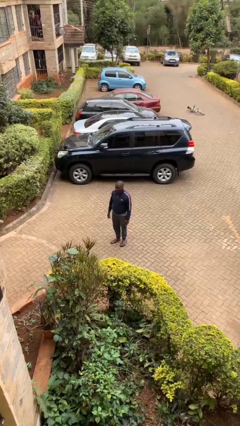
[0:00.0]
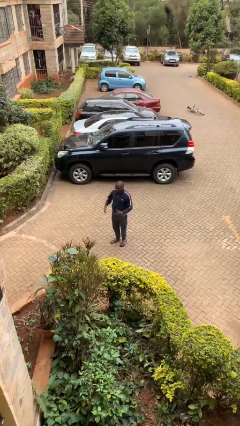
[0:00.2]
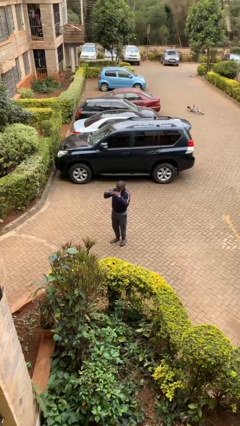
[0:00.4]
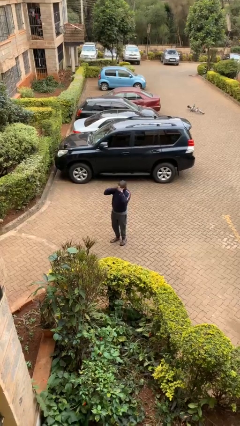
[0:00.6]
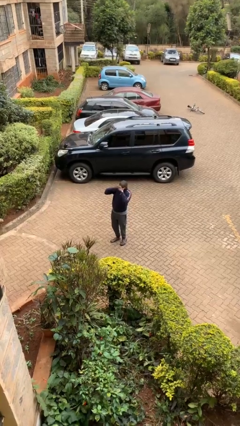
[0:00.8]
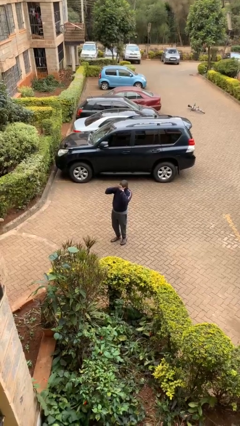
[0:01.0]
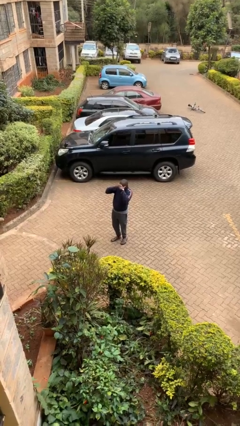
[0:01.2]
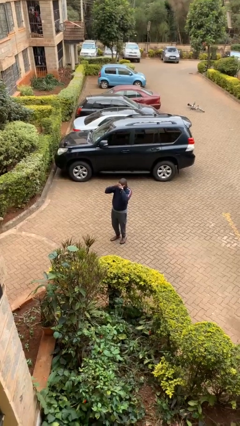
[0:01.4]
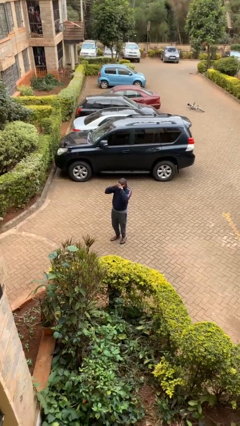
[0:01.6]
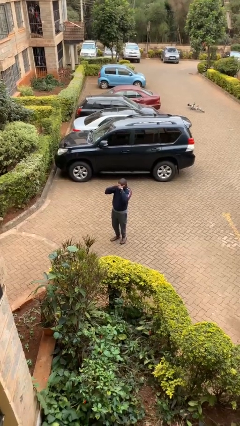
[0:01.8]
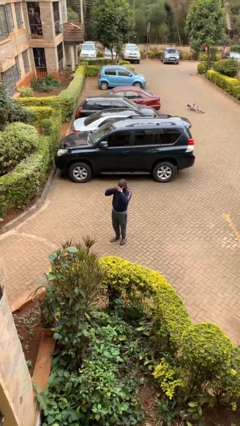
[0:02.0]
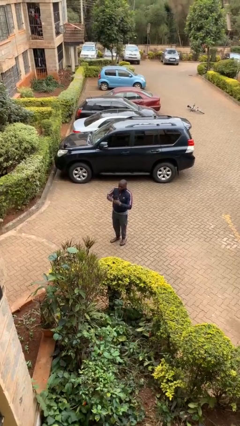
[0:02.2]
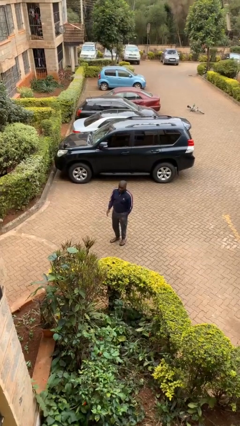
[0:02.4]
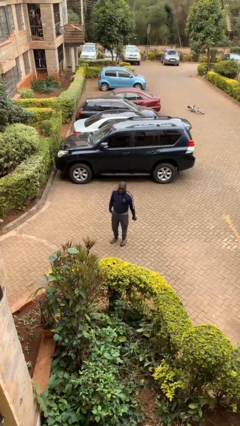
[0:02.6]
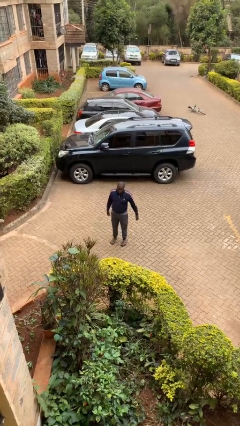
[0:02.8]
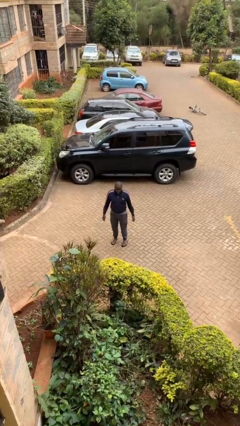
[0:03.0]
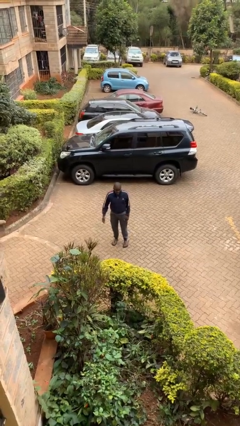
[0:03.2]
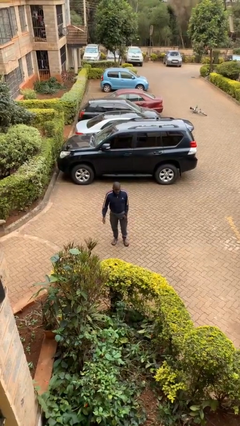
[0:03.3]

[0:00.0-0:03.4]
person shades eyes

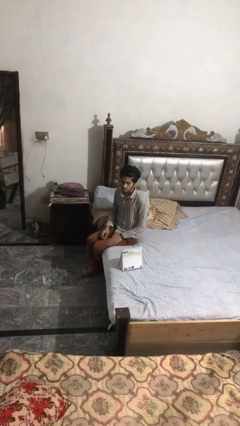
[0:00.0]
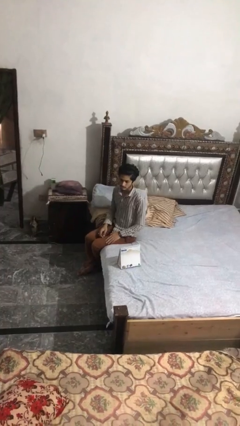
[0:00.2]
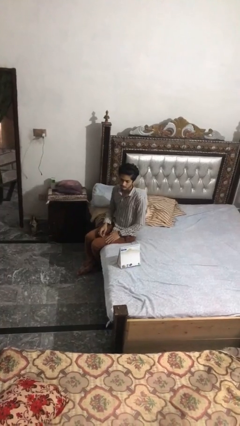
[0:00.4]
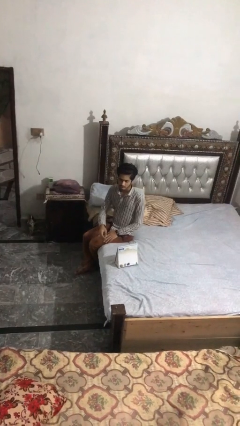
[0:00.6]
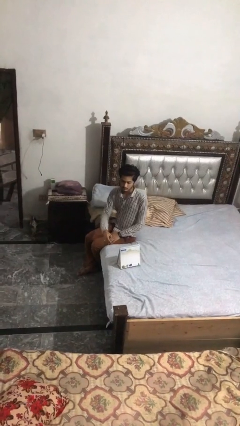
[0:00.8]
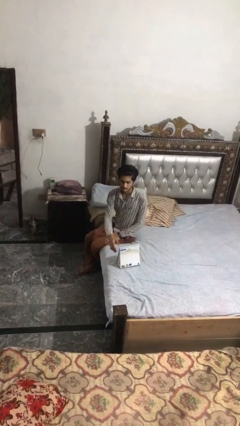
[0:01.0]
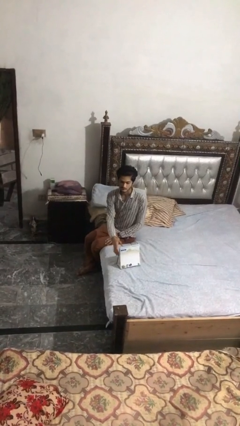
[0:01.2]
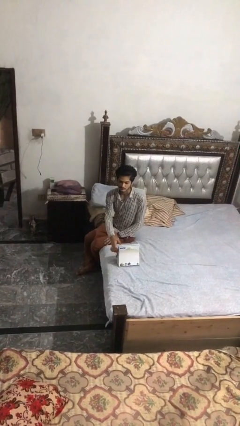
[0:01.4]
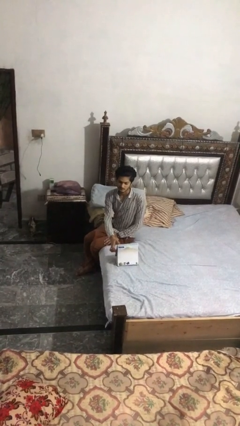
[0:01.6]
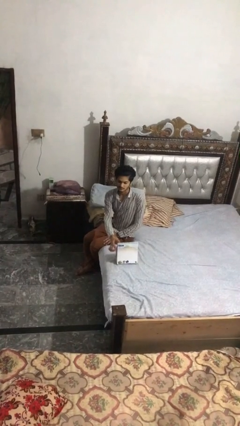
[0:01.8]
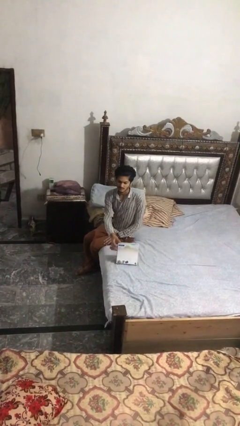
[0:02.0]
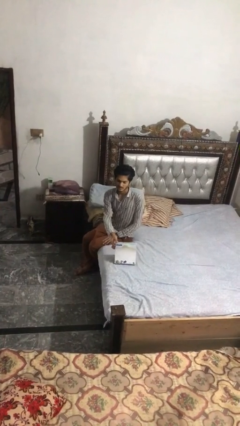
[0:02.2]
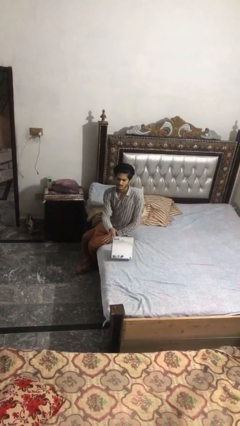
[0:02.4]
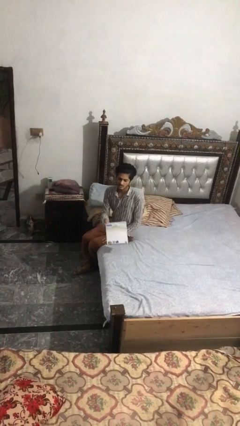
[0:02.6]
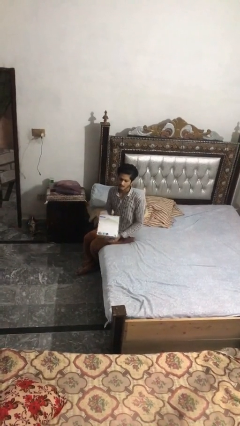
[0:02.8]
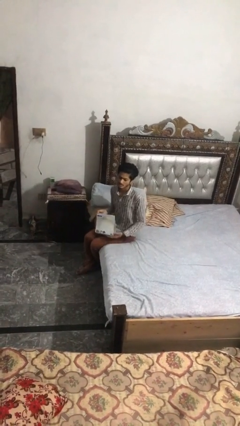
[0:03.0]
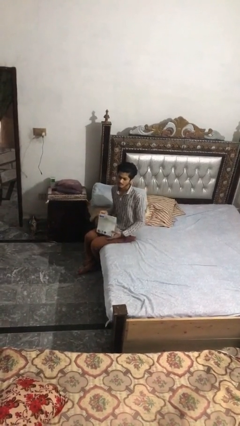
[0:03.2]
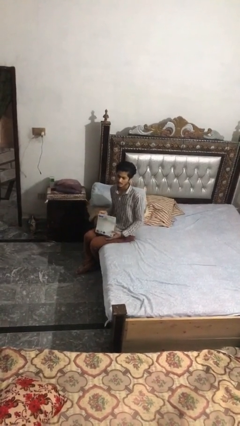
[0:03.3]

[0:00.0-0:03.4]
person picks up object from bed

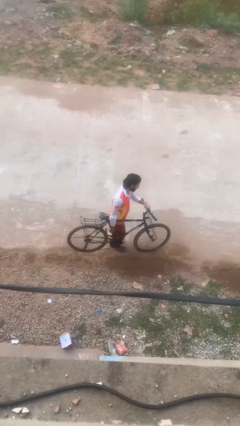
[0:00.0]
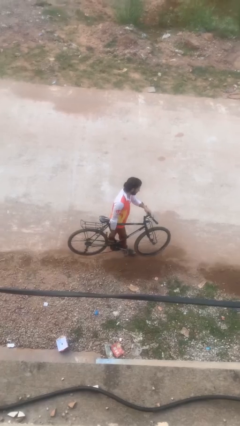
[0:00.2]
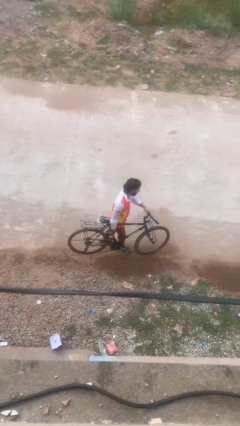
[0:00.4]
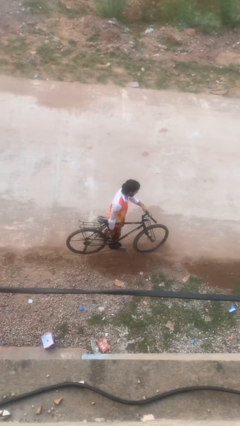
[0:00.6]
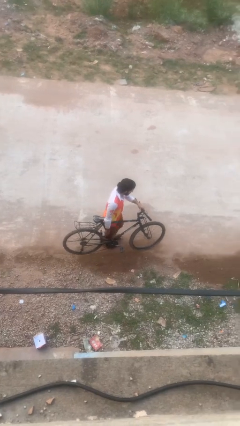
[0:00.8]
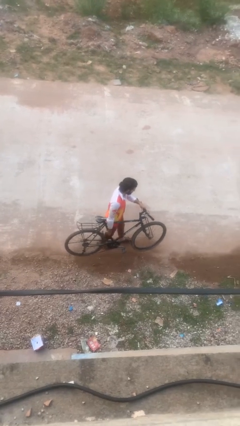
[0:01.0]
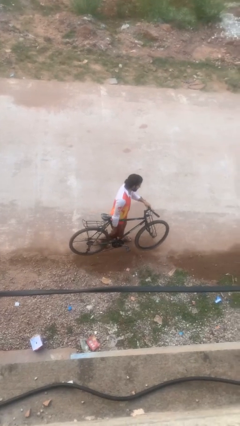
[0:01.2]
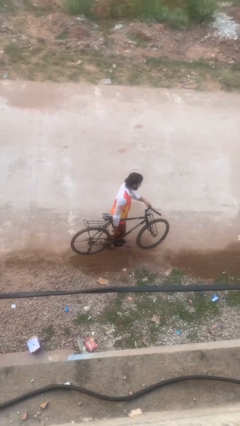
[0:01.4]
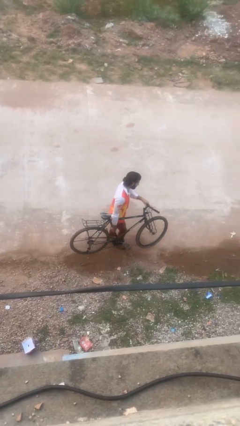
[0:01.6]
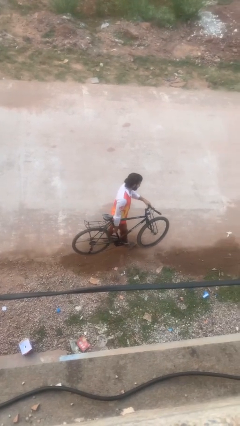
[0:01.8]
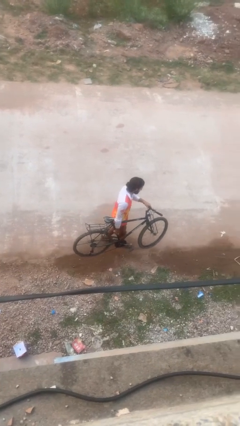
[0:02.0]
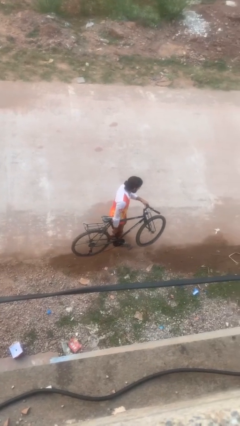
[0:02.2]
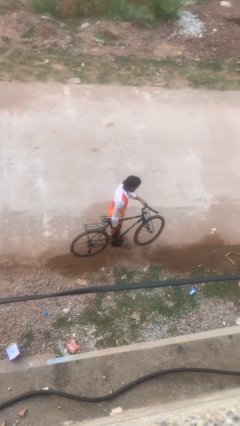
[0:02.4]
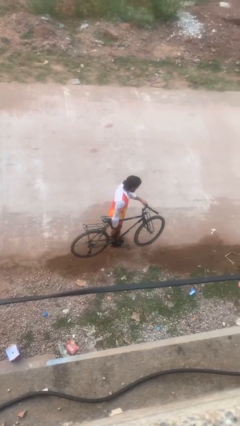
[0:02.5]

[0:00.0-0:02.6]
person carries bicycle

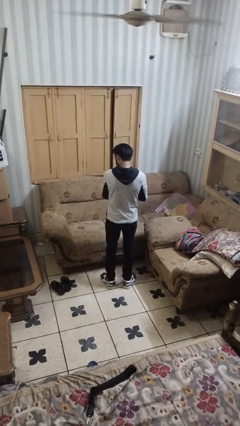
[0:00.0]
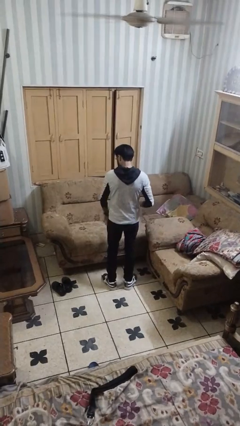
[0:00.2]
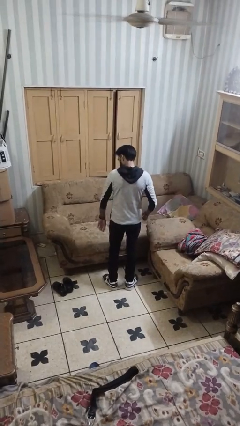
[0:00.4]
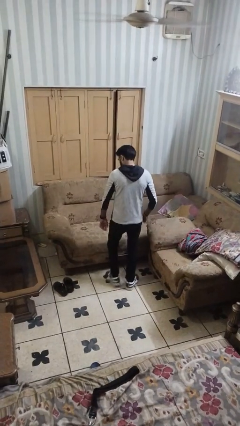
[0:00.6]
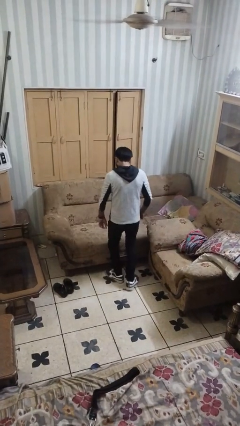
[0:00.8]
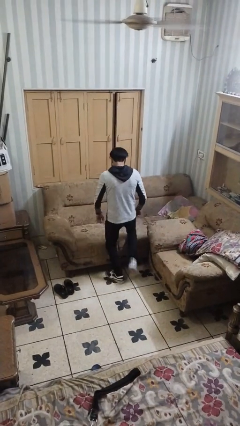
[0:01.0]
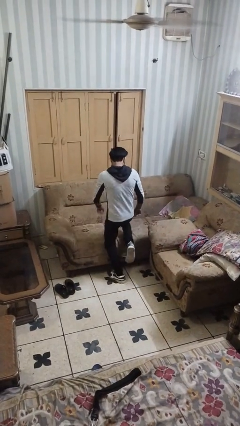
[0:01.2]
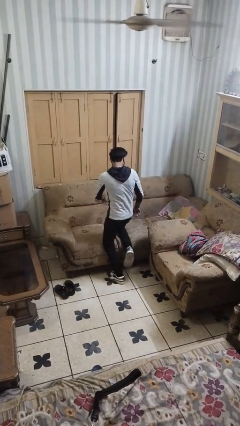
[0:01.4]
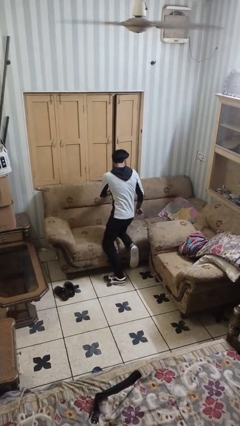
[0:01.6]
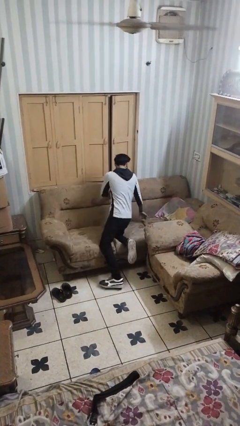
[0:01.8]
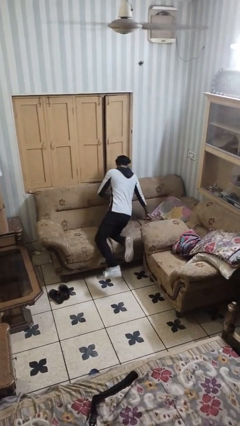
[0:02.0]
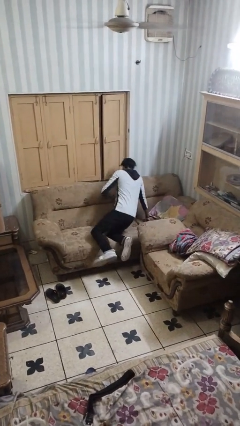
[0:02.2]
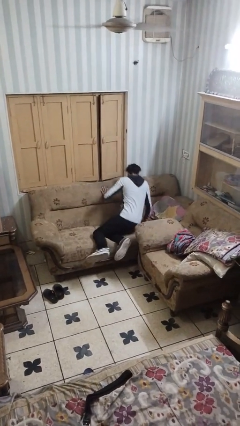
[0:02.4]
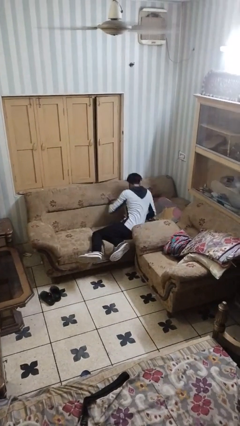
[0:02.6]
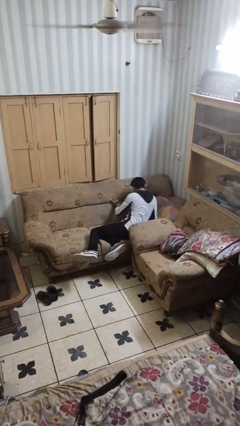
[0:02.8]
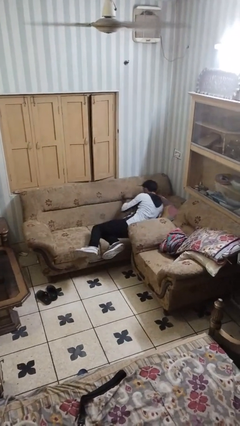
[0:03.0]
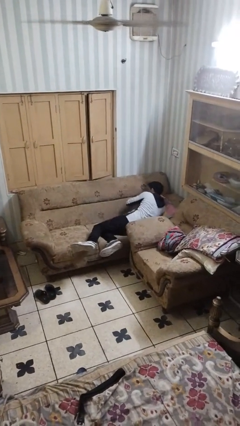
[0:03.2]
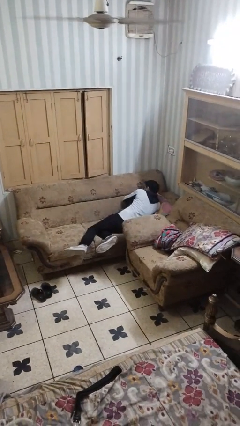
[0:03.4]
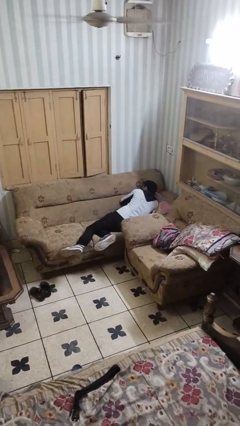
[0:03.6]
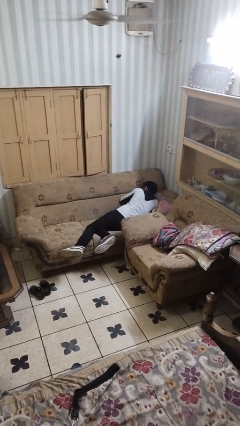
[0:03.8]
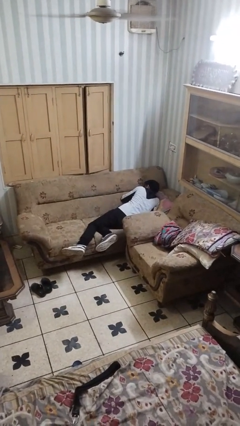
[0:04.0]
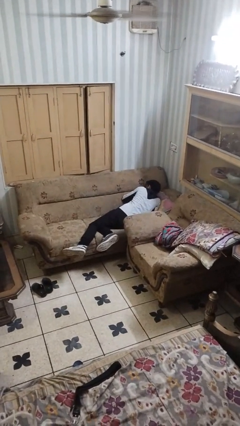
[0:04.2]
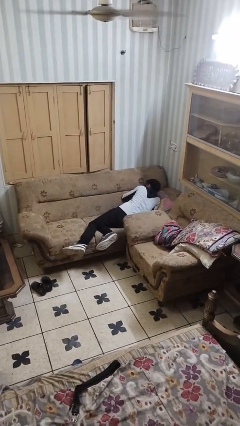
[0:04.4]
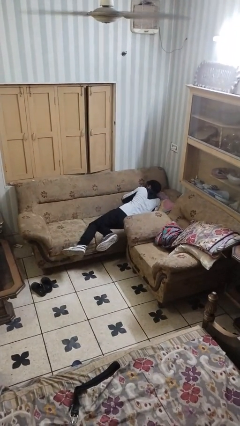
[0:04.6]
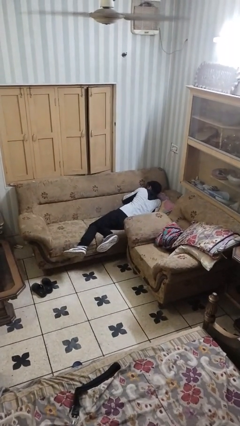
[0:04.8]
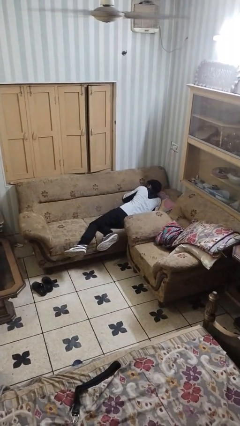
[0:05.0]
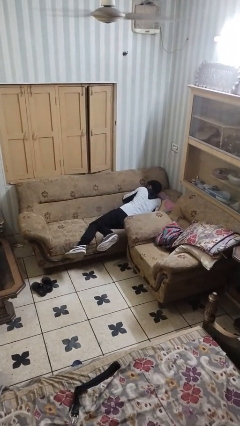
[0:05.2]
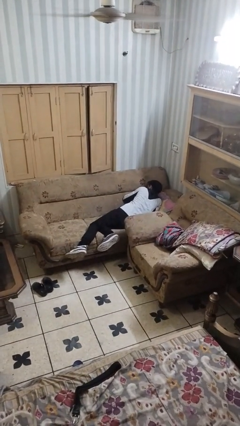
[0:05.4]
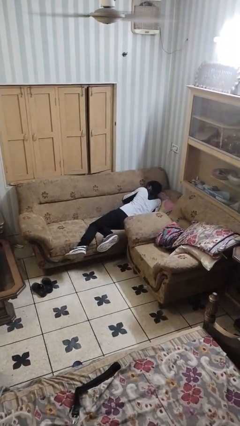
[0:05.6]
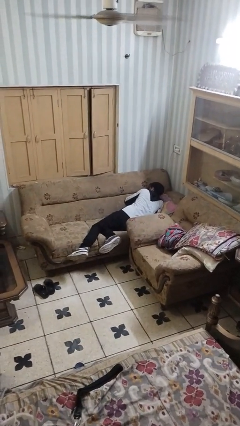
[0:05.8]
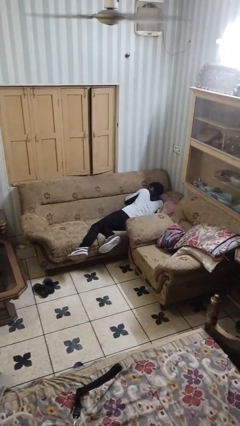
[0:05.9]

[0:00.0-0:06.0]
person lies down on couch

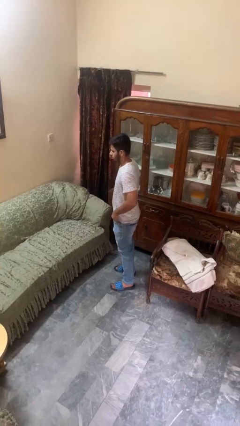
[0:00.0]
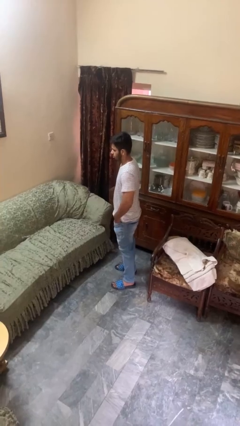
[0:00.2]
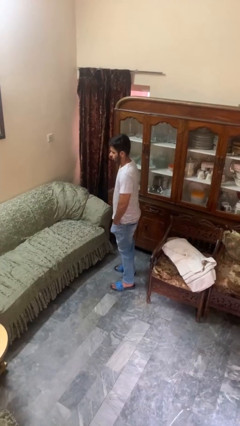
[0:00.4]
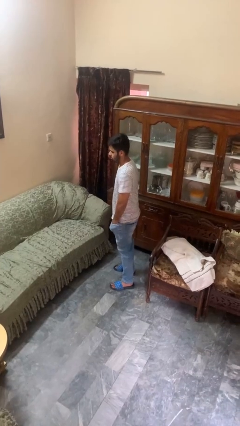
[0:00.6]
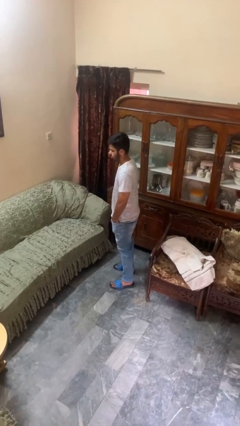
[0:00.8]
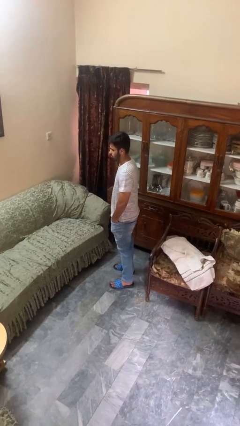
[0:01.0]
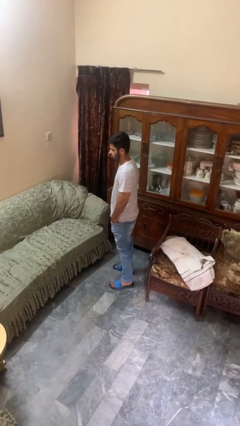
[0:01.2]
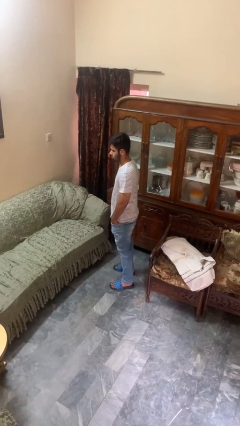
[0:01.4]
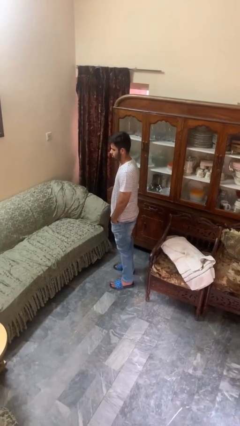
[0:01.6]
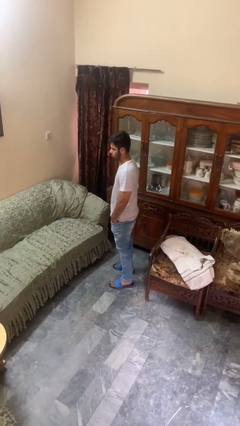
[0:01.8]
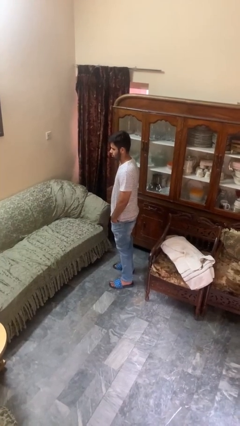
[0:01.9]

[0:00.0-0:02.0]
person puts hands in back pockets

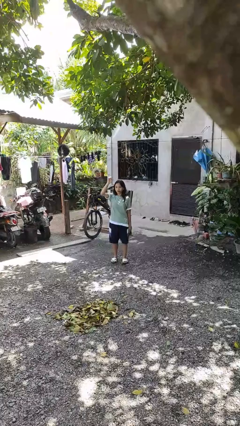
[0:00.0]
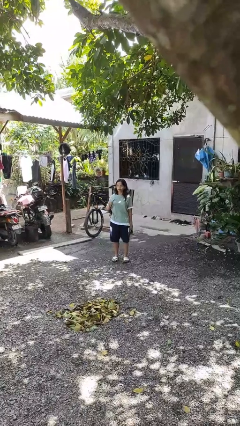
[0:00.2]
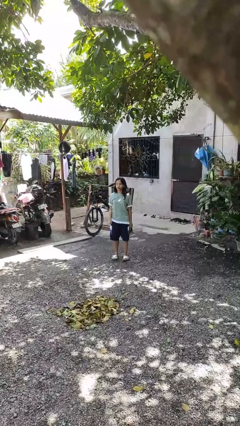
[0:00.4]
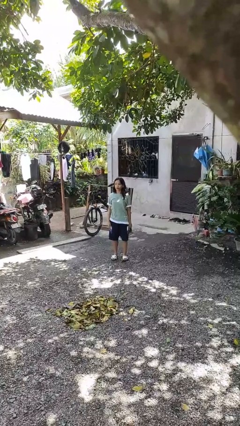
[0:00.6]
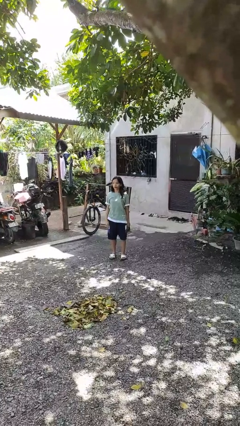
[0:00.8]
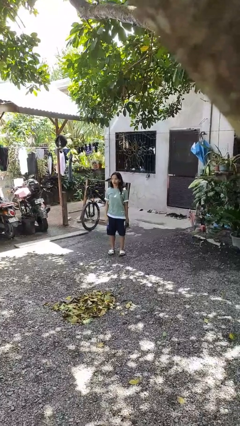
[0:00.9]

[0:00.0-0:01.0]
person gestures lower hand
